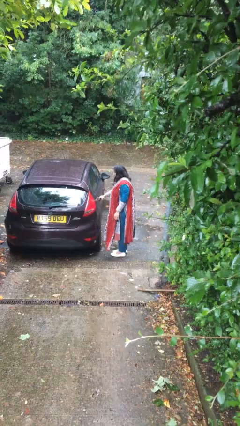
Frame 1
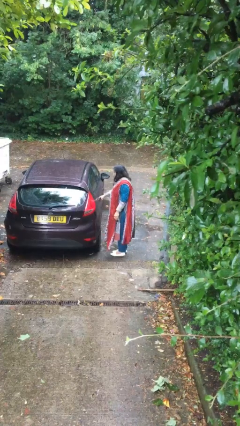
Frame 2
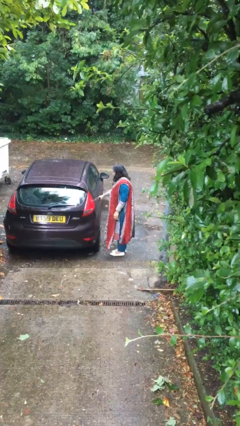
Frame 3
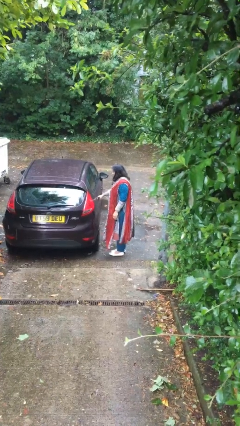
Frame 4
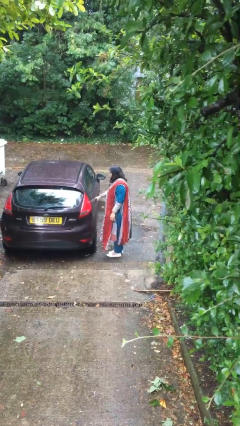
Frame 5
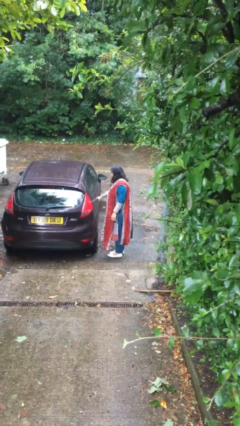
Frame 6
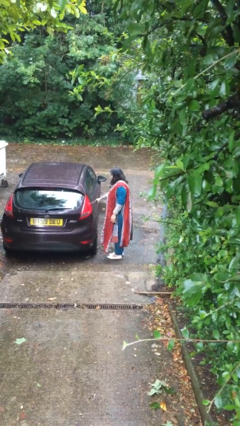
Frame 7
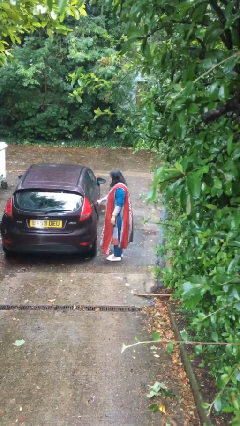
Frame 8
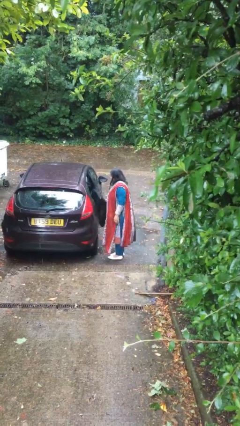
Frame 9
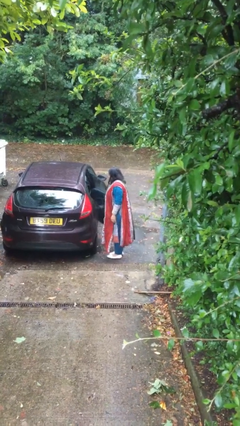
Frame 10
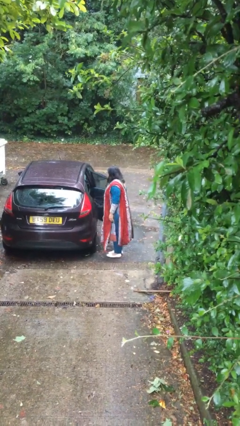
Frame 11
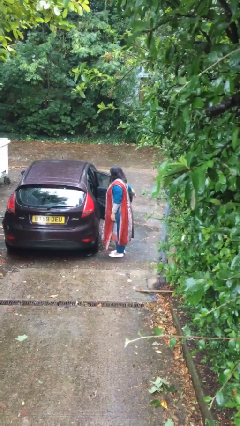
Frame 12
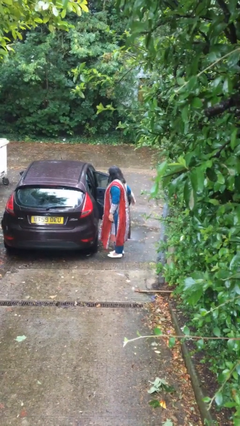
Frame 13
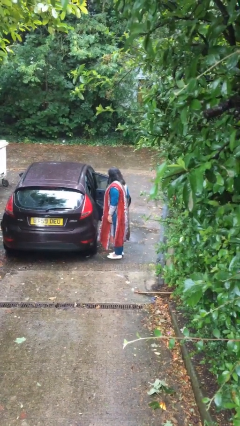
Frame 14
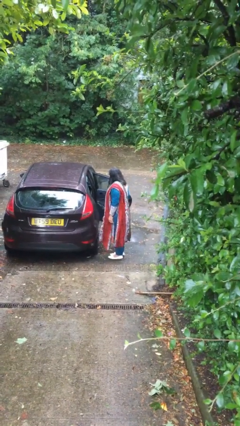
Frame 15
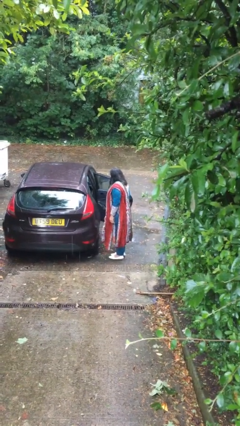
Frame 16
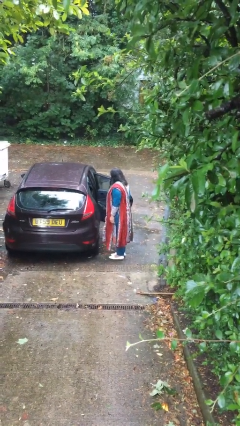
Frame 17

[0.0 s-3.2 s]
person opens car door

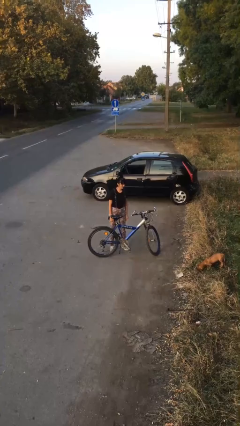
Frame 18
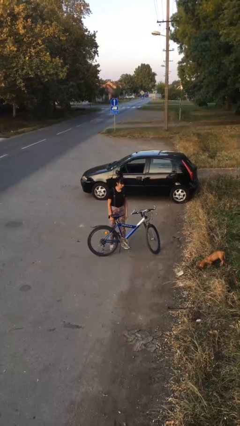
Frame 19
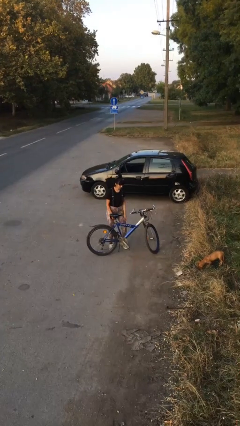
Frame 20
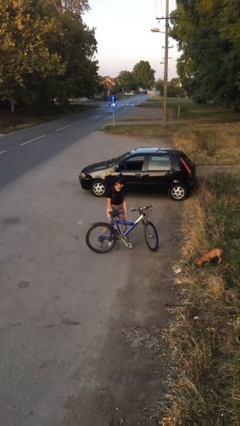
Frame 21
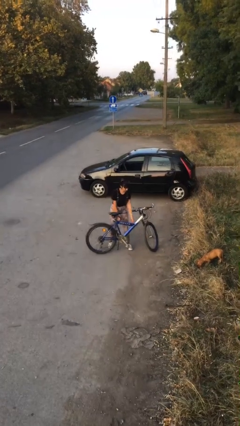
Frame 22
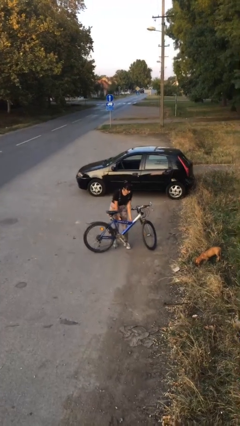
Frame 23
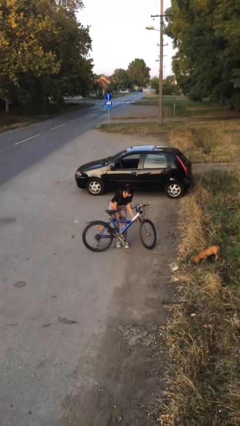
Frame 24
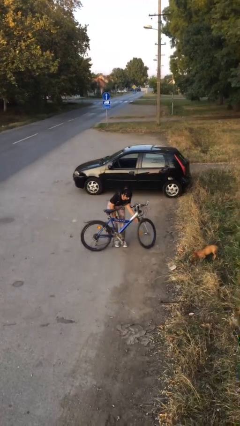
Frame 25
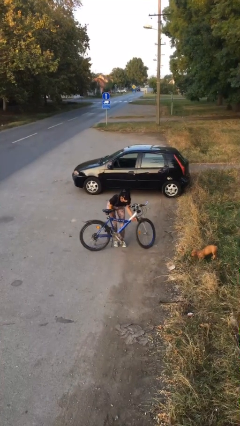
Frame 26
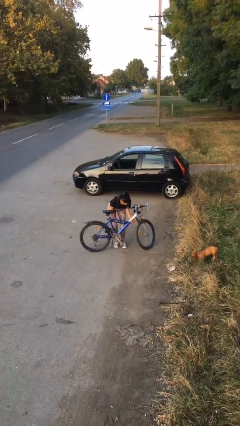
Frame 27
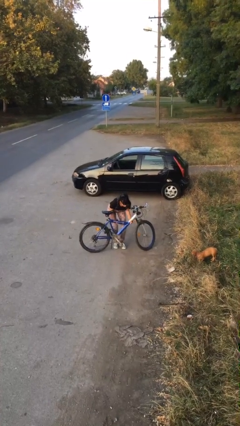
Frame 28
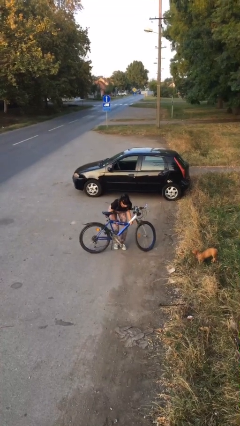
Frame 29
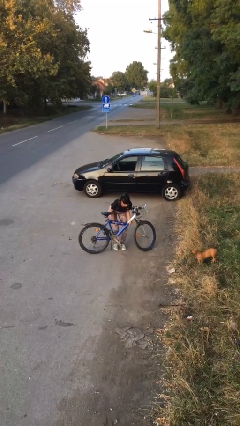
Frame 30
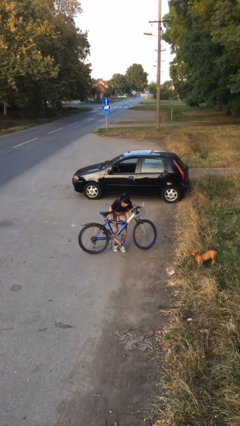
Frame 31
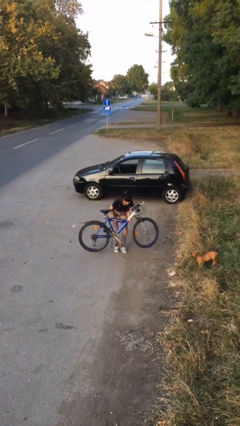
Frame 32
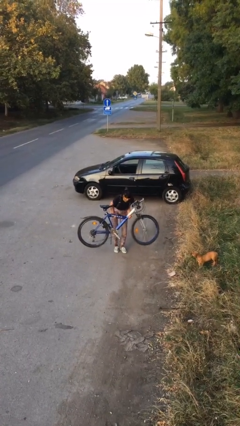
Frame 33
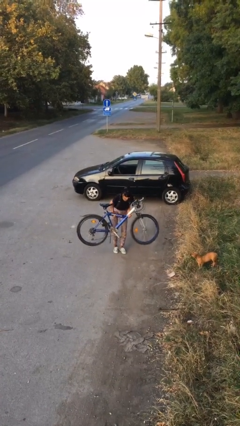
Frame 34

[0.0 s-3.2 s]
person picks up object from floor

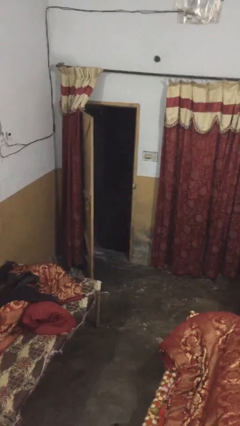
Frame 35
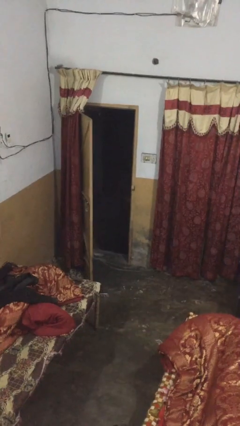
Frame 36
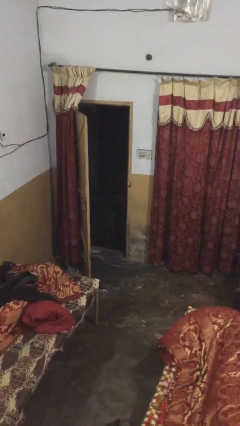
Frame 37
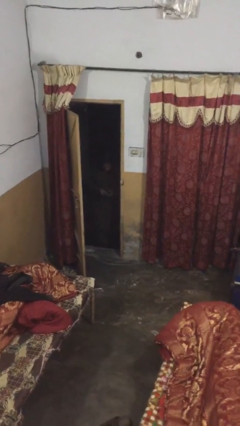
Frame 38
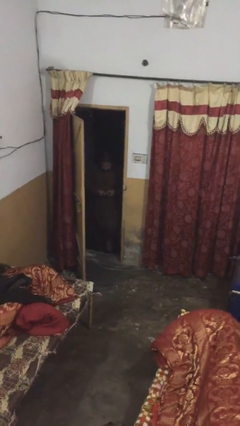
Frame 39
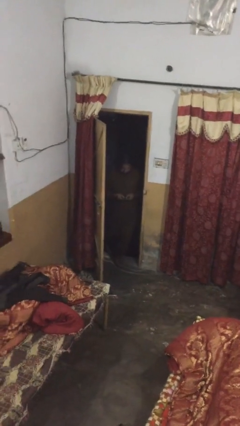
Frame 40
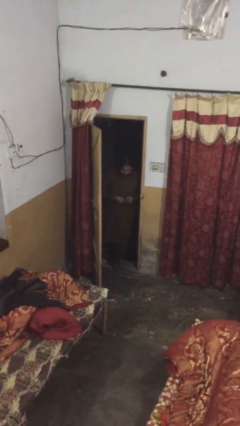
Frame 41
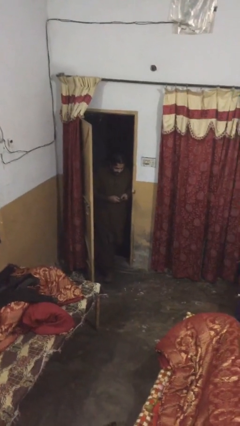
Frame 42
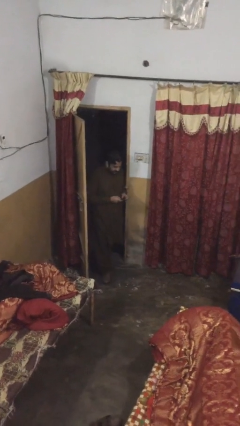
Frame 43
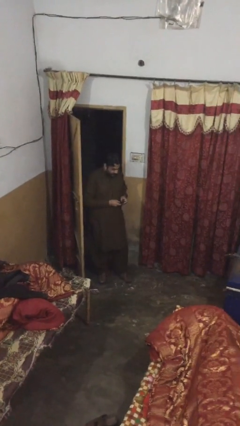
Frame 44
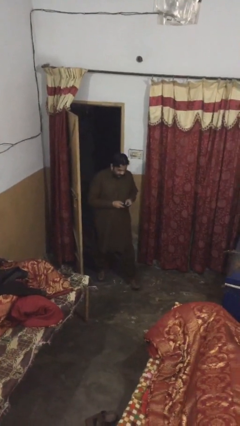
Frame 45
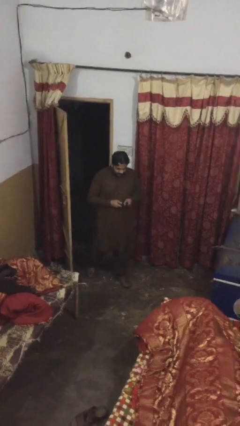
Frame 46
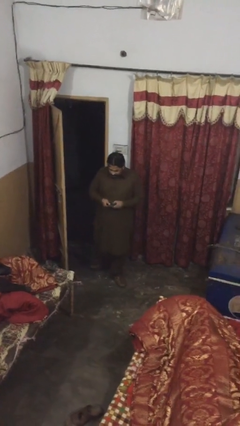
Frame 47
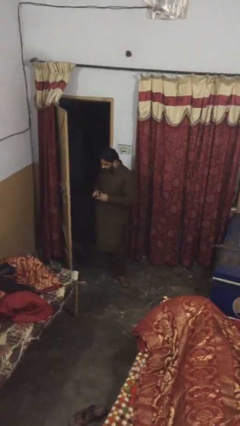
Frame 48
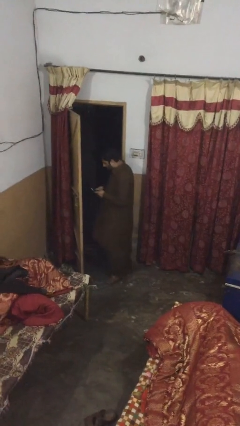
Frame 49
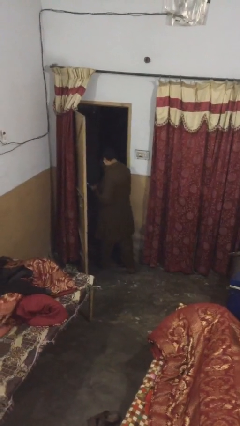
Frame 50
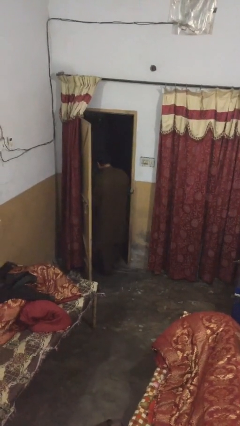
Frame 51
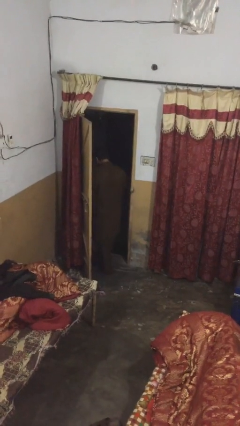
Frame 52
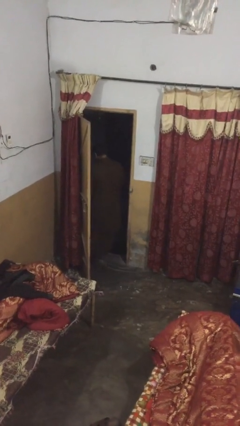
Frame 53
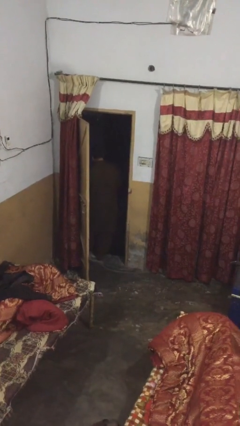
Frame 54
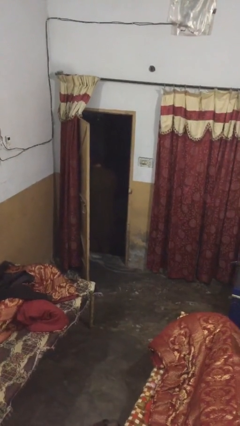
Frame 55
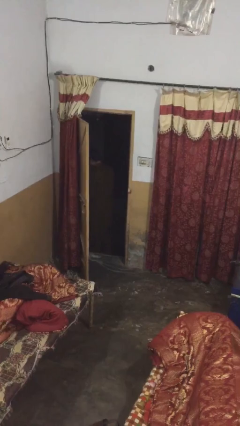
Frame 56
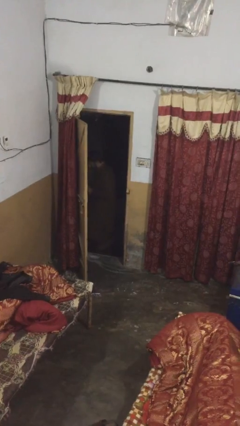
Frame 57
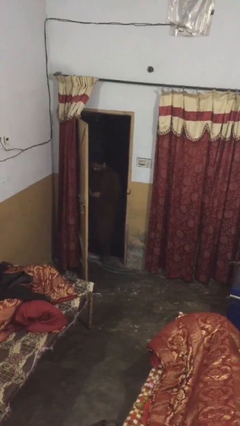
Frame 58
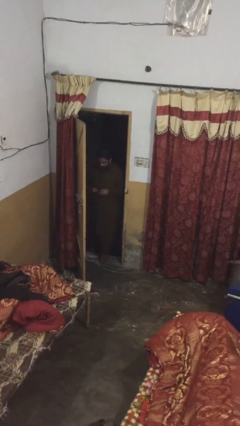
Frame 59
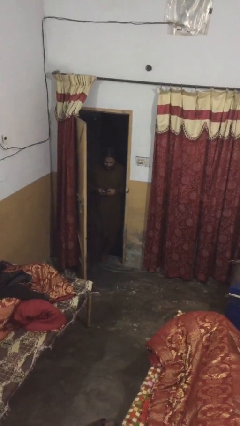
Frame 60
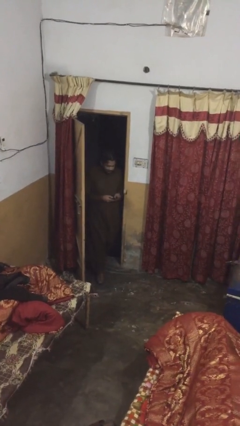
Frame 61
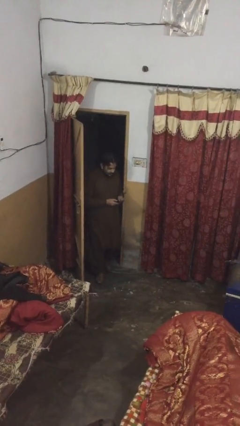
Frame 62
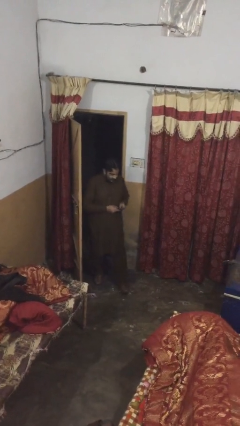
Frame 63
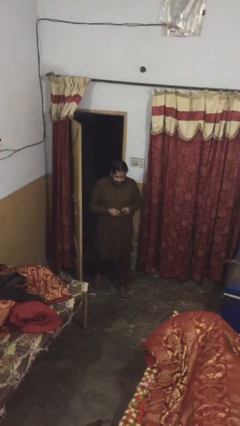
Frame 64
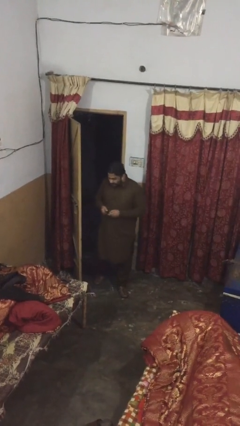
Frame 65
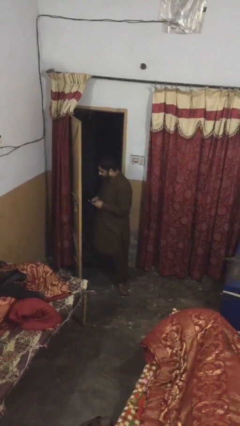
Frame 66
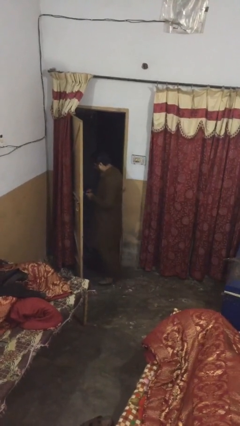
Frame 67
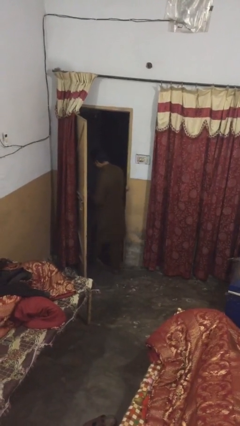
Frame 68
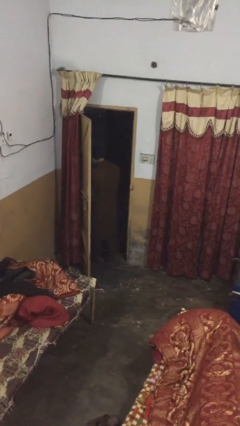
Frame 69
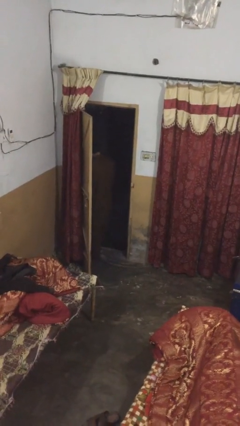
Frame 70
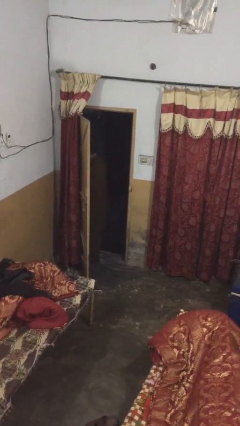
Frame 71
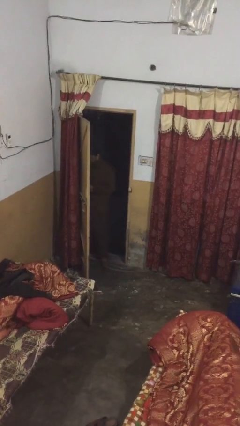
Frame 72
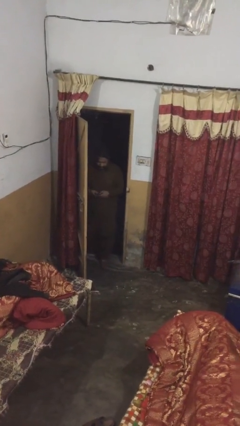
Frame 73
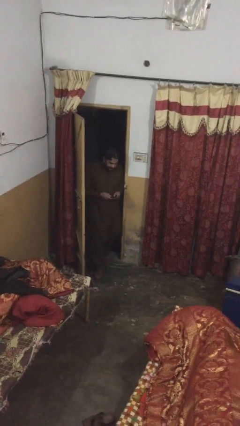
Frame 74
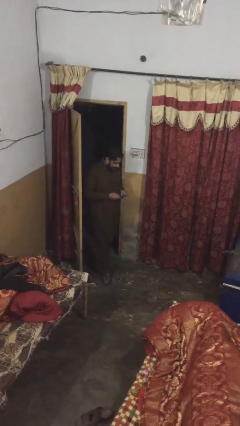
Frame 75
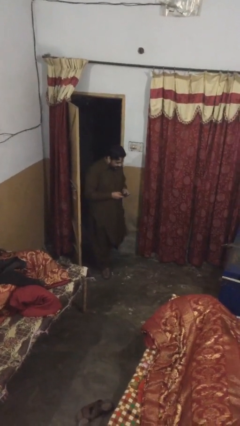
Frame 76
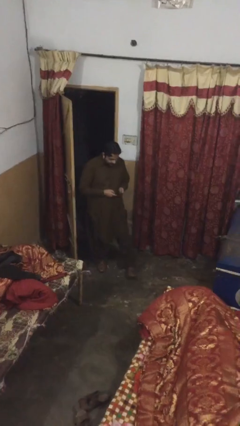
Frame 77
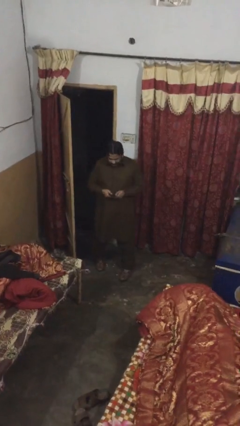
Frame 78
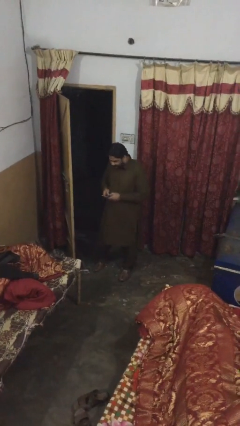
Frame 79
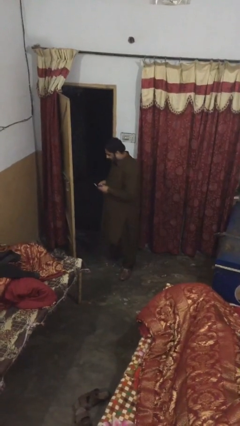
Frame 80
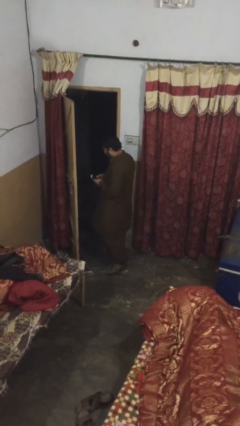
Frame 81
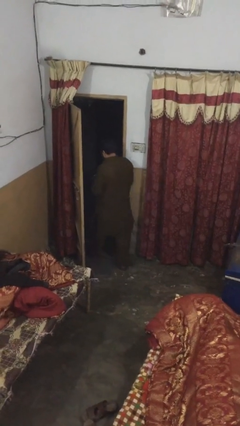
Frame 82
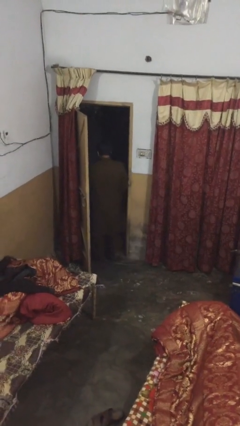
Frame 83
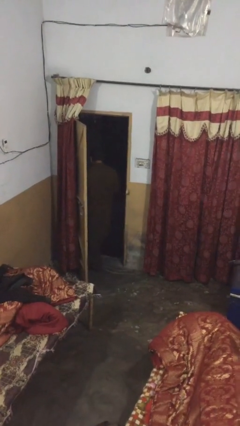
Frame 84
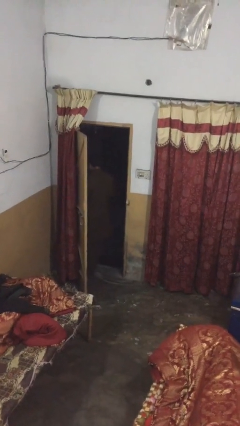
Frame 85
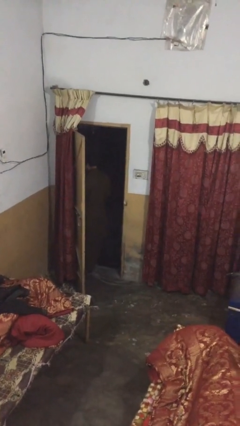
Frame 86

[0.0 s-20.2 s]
person texts on phone

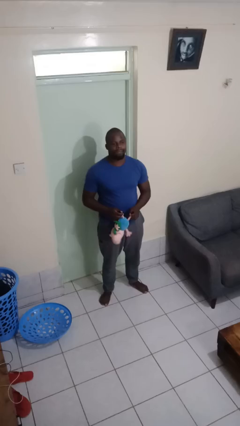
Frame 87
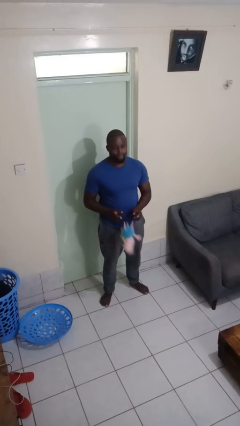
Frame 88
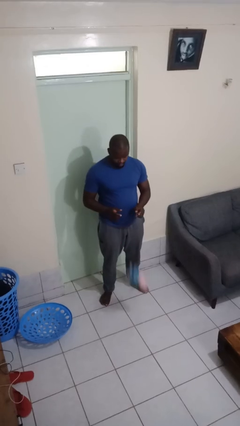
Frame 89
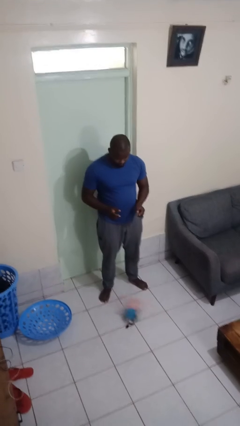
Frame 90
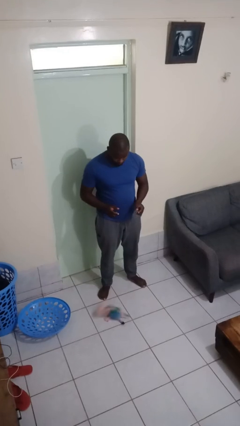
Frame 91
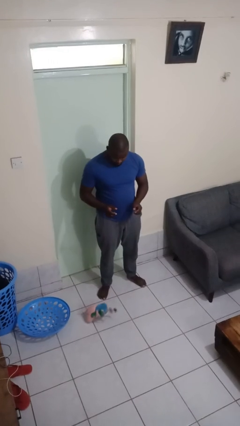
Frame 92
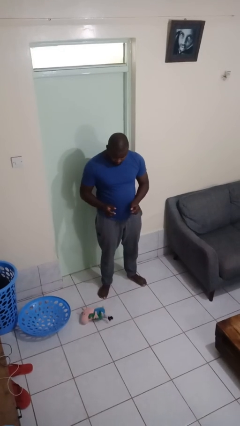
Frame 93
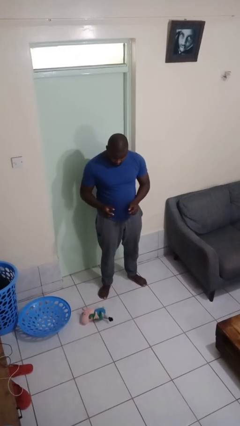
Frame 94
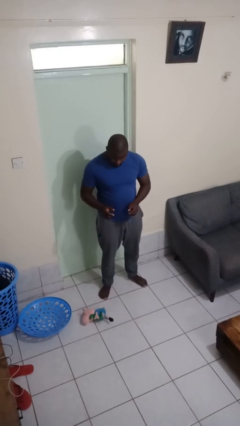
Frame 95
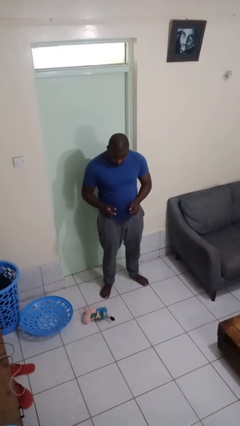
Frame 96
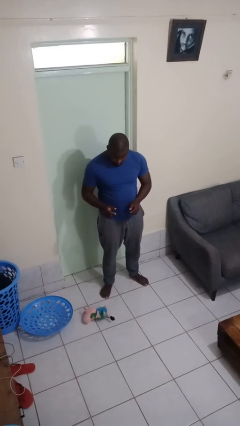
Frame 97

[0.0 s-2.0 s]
person drops object
